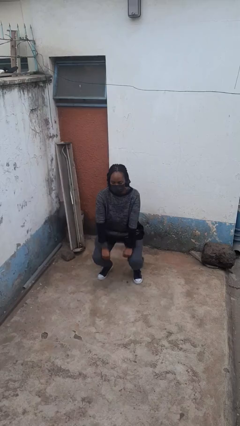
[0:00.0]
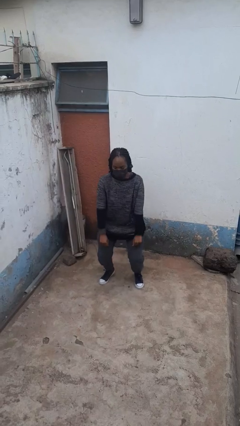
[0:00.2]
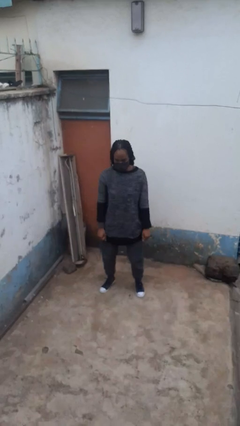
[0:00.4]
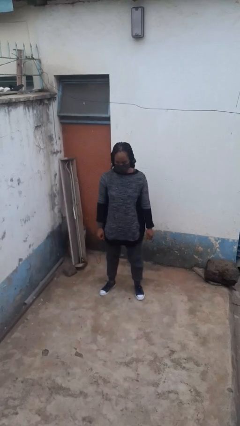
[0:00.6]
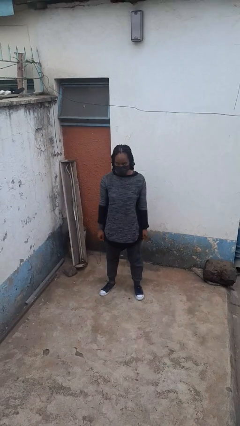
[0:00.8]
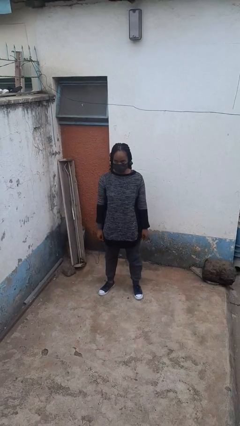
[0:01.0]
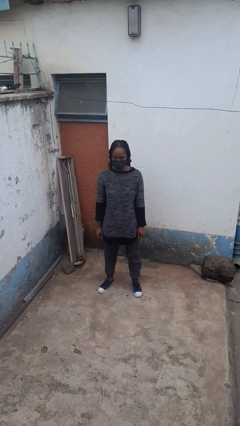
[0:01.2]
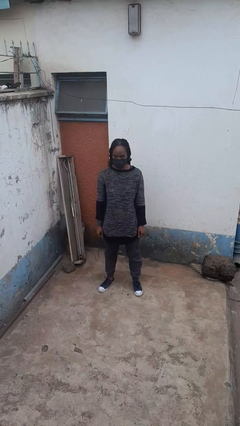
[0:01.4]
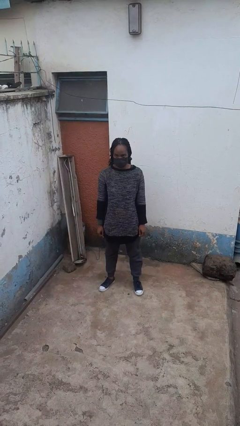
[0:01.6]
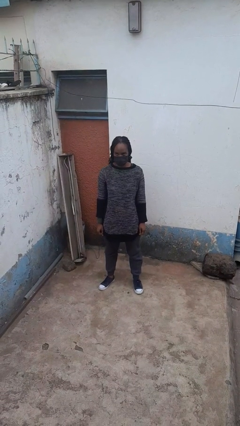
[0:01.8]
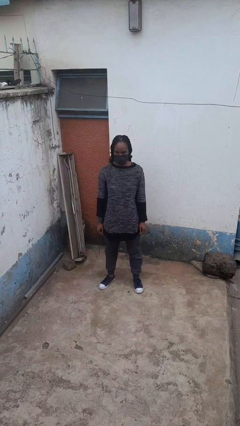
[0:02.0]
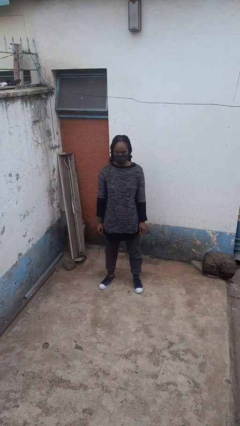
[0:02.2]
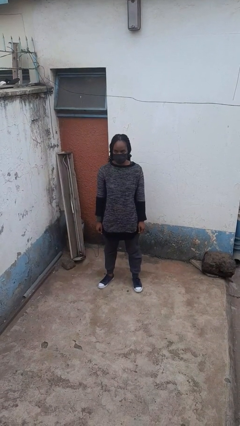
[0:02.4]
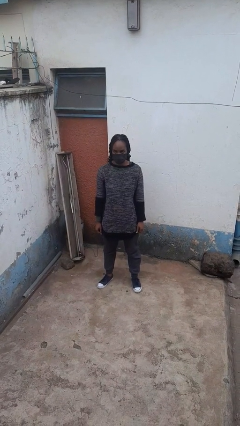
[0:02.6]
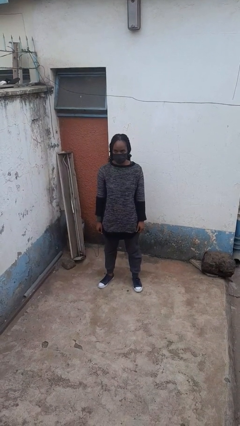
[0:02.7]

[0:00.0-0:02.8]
person stands up

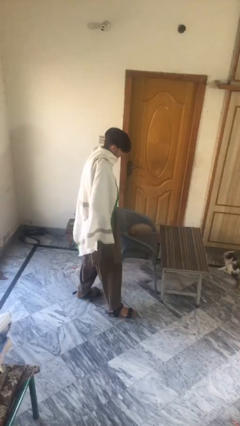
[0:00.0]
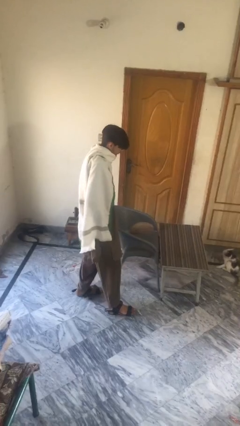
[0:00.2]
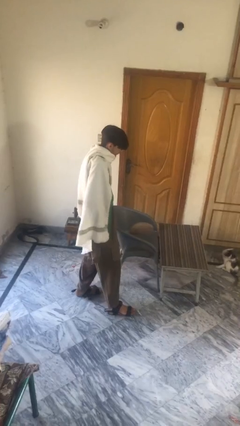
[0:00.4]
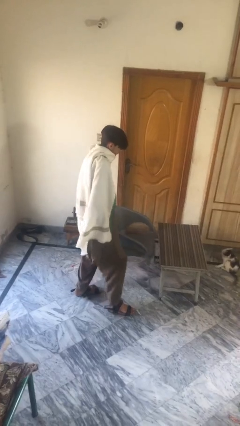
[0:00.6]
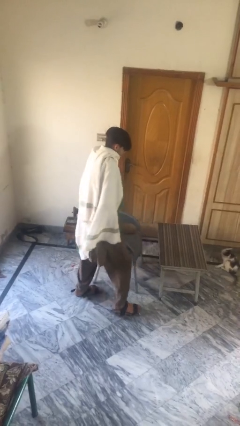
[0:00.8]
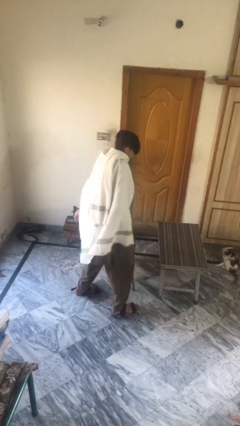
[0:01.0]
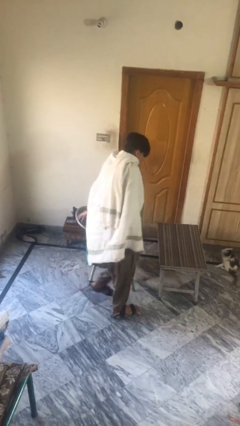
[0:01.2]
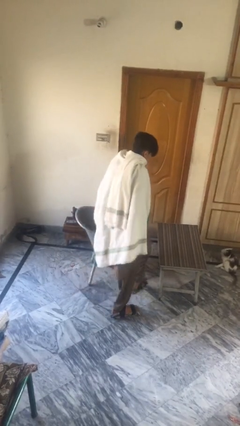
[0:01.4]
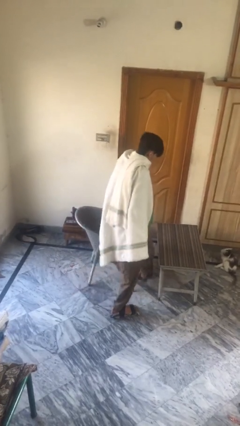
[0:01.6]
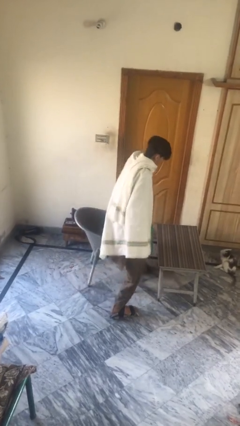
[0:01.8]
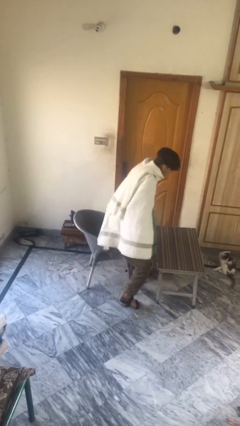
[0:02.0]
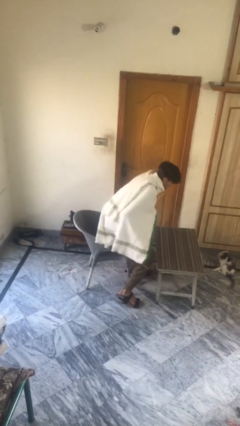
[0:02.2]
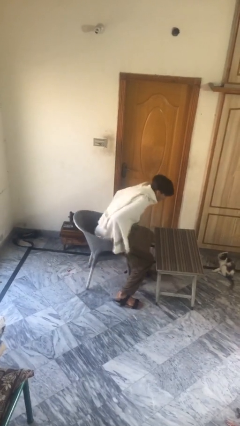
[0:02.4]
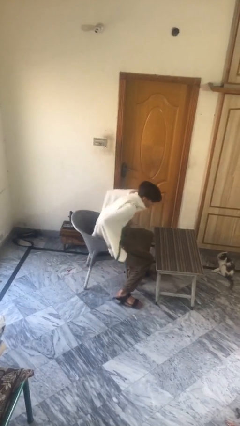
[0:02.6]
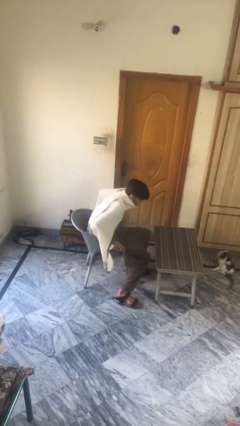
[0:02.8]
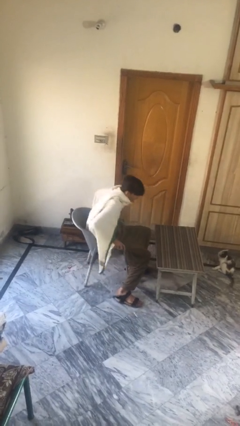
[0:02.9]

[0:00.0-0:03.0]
person sits down

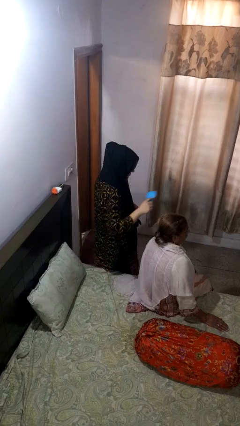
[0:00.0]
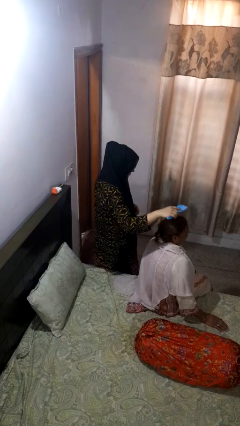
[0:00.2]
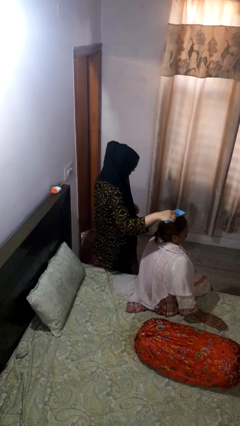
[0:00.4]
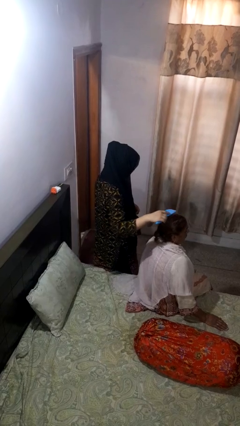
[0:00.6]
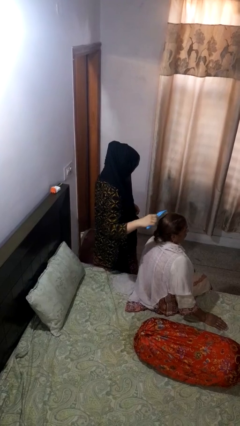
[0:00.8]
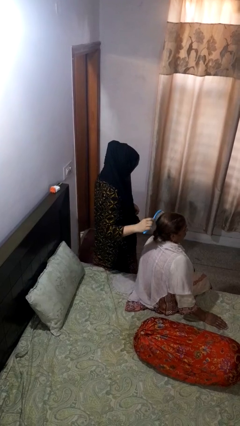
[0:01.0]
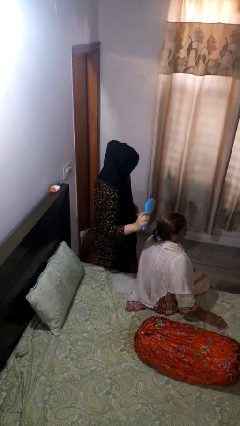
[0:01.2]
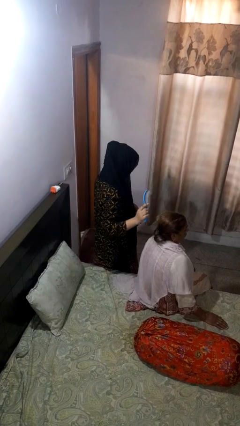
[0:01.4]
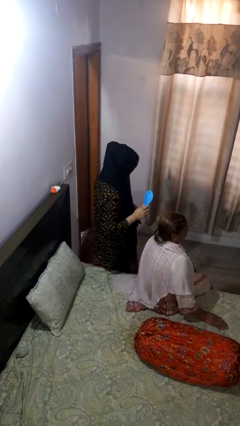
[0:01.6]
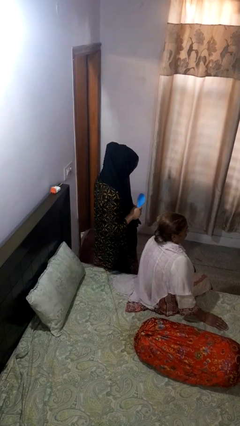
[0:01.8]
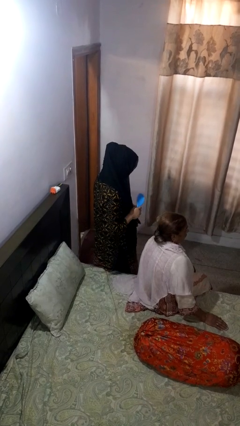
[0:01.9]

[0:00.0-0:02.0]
person brushes hair of person

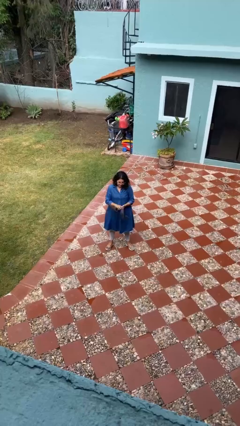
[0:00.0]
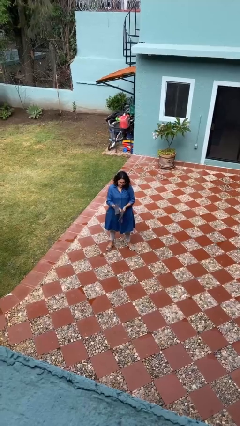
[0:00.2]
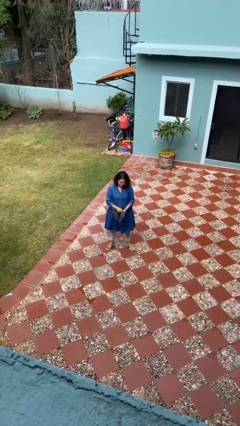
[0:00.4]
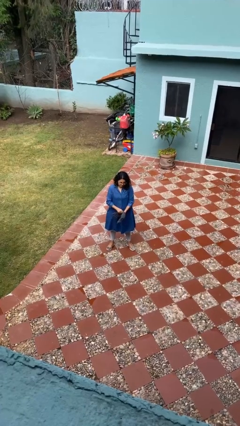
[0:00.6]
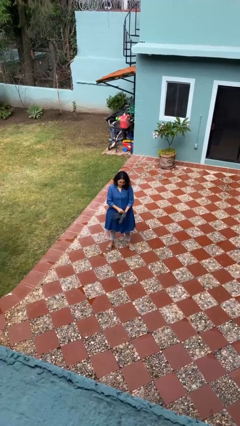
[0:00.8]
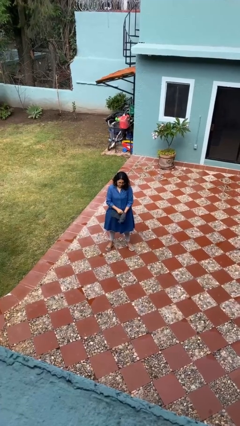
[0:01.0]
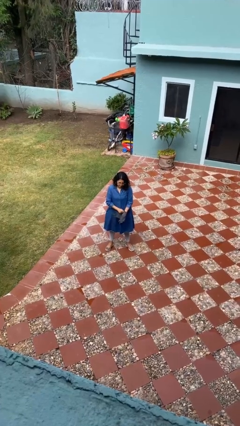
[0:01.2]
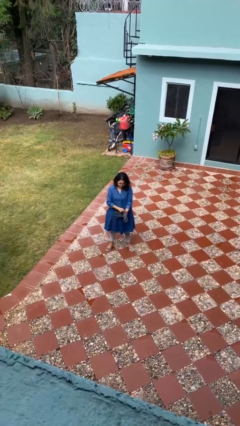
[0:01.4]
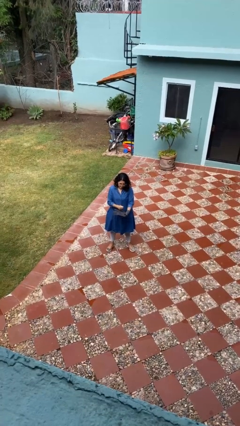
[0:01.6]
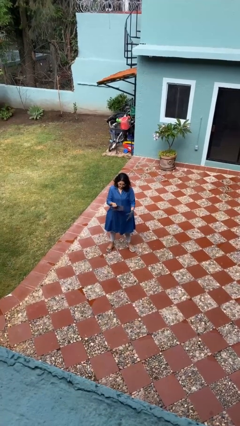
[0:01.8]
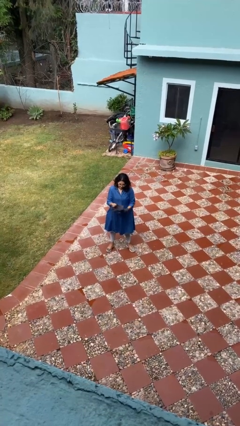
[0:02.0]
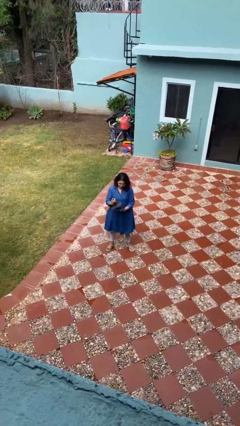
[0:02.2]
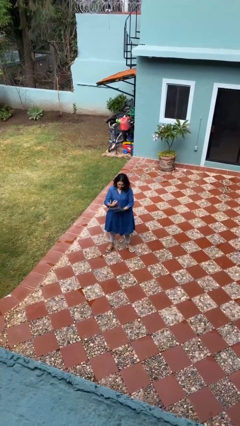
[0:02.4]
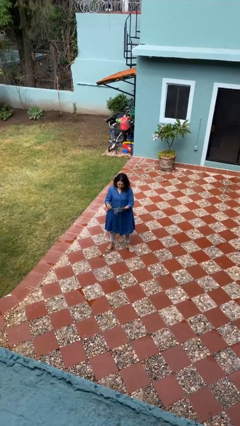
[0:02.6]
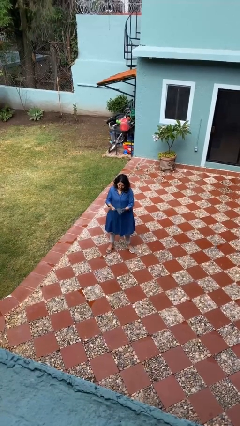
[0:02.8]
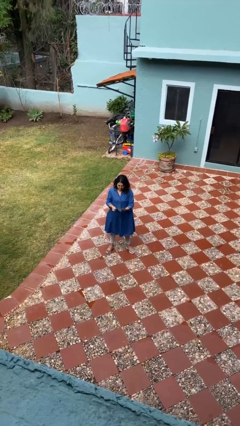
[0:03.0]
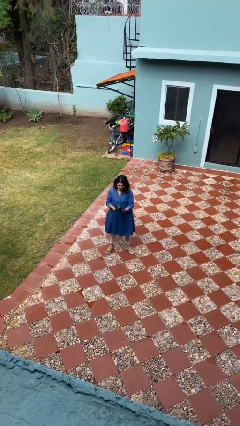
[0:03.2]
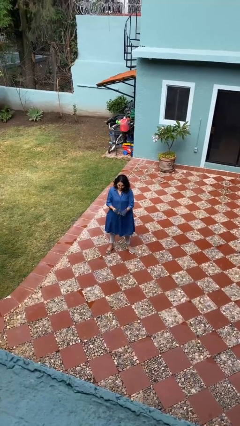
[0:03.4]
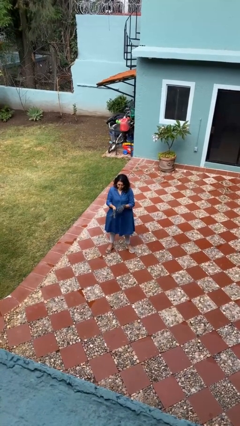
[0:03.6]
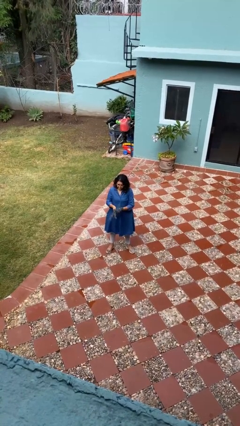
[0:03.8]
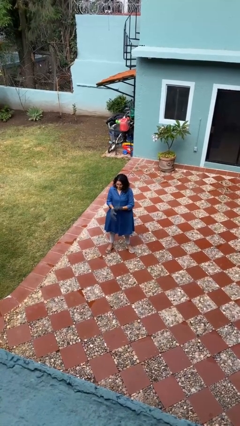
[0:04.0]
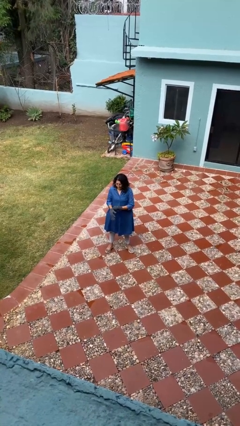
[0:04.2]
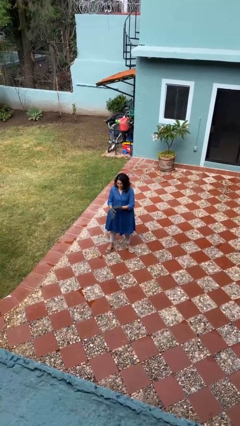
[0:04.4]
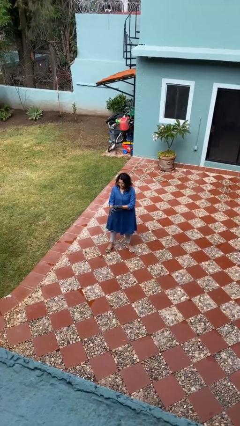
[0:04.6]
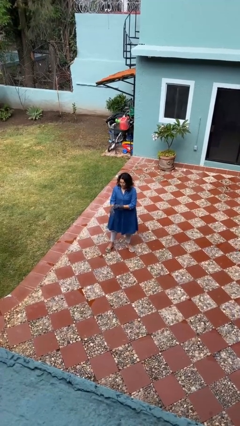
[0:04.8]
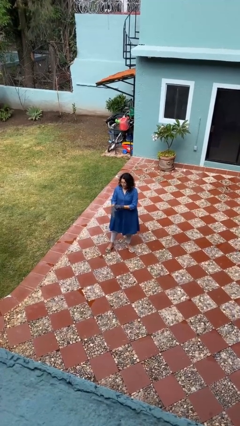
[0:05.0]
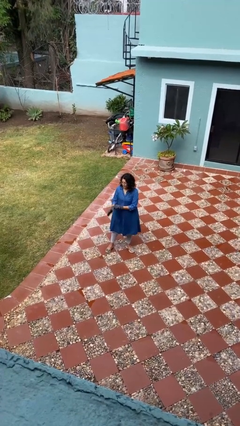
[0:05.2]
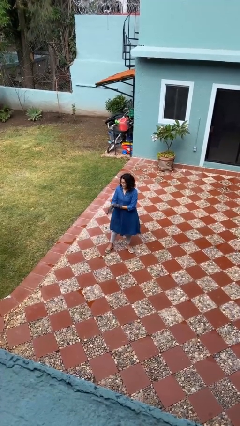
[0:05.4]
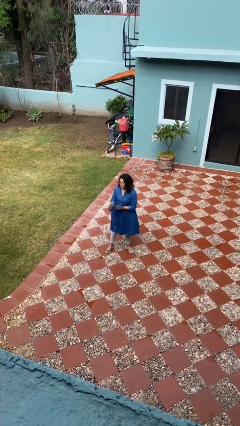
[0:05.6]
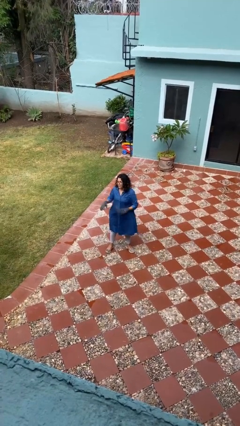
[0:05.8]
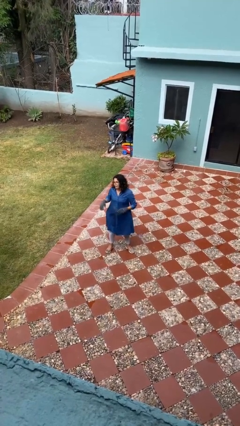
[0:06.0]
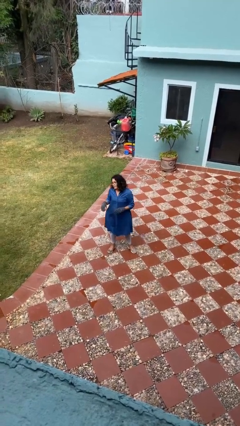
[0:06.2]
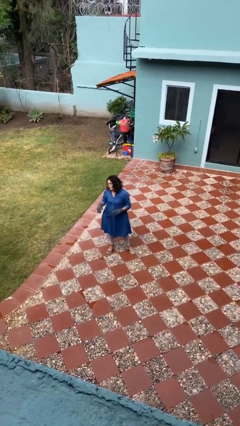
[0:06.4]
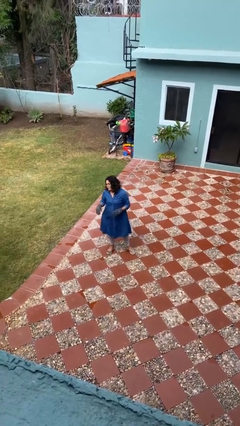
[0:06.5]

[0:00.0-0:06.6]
person puts on gloves

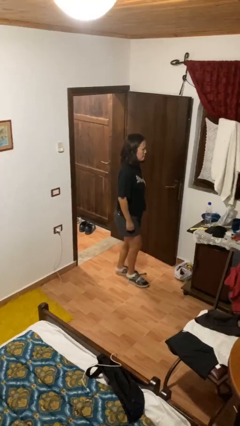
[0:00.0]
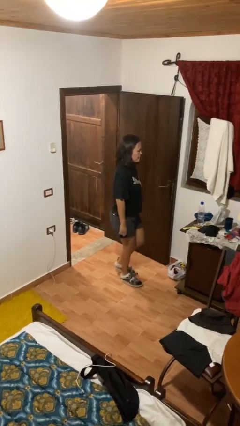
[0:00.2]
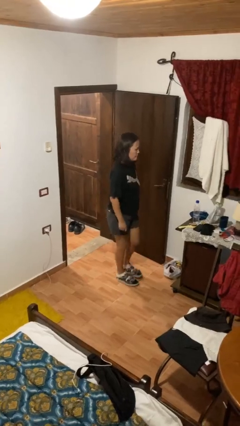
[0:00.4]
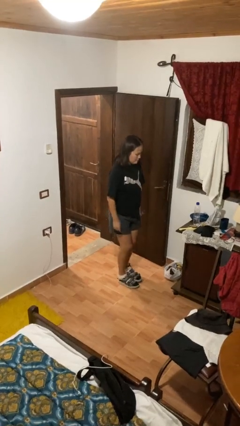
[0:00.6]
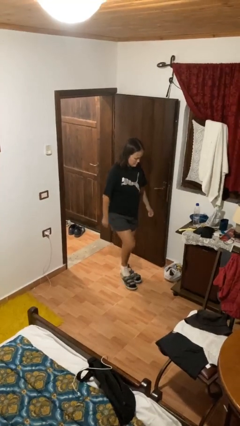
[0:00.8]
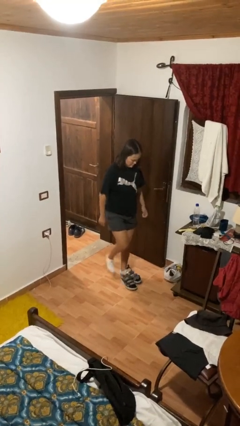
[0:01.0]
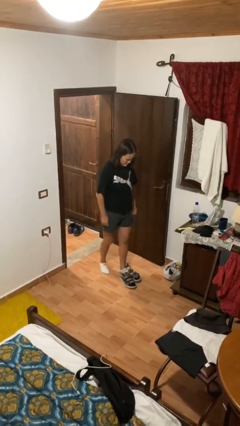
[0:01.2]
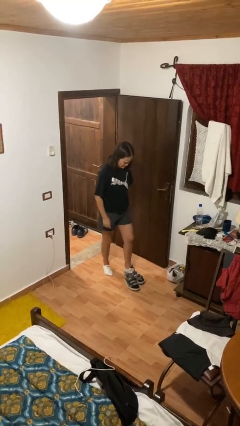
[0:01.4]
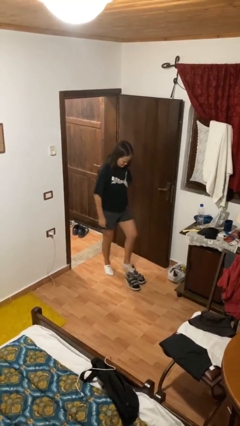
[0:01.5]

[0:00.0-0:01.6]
person takes off shoes

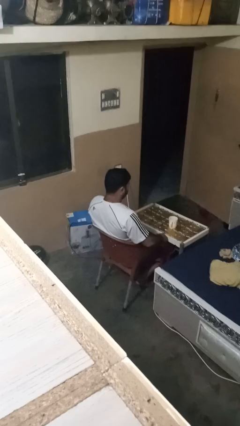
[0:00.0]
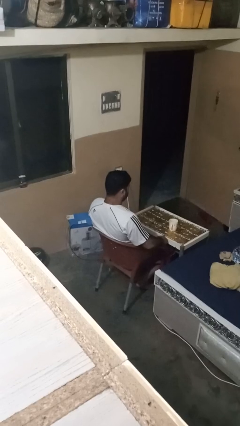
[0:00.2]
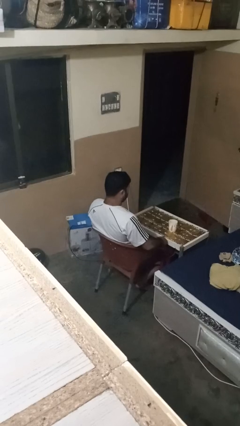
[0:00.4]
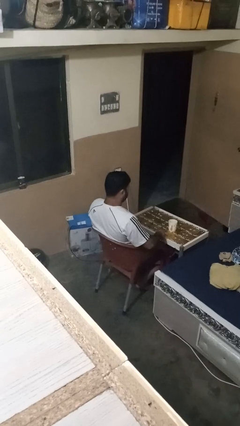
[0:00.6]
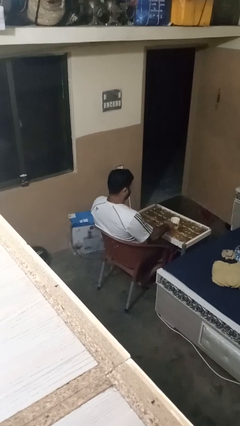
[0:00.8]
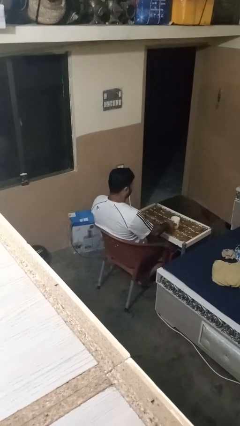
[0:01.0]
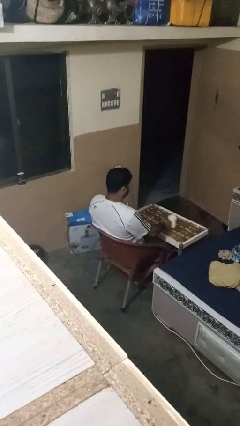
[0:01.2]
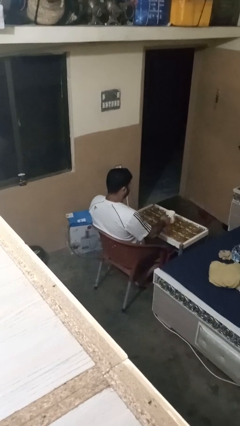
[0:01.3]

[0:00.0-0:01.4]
person picks up object from table
